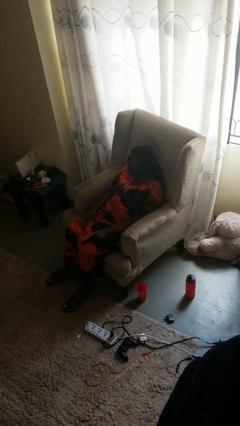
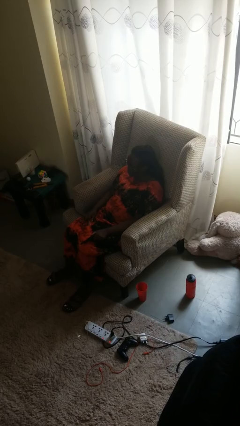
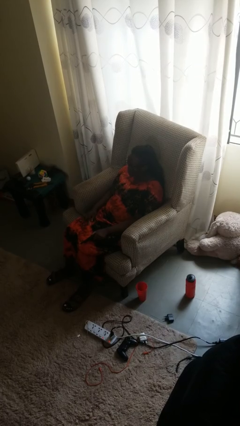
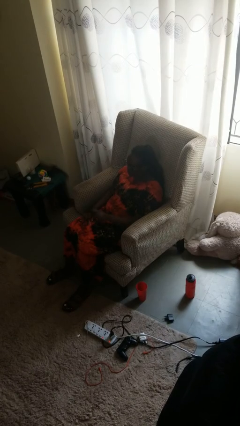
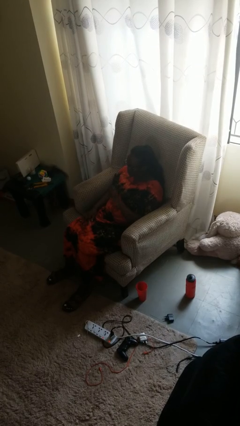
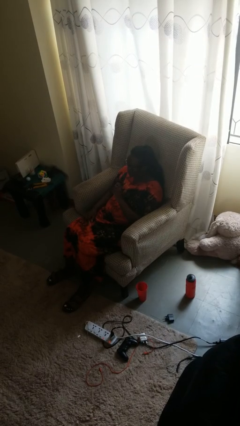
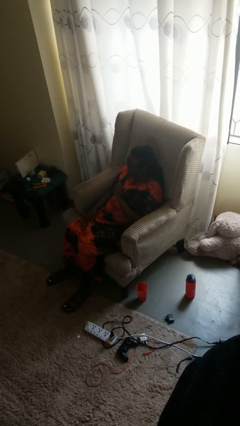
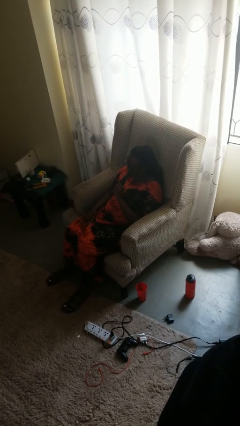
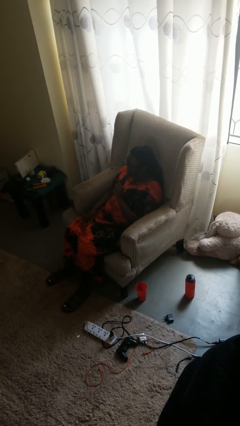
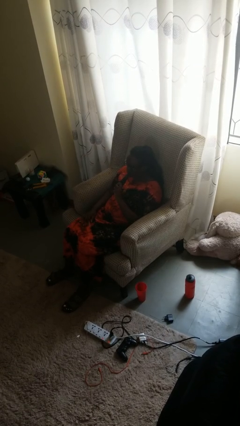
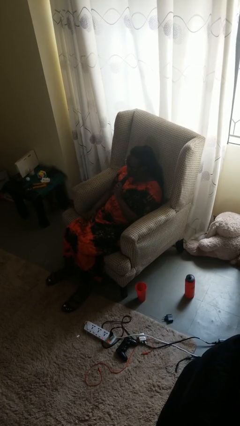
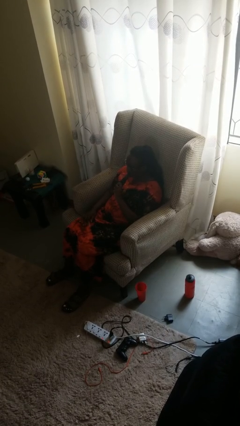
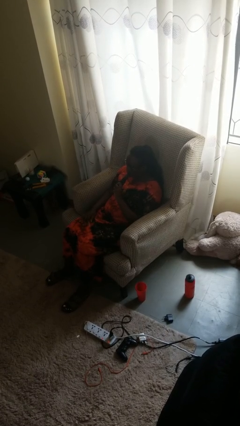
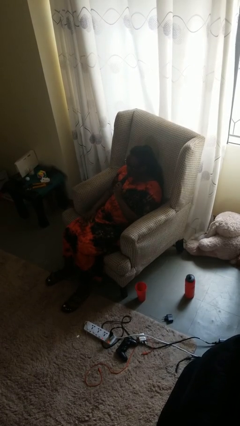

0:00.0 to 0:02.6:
person vapes

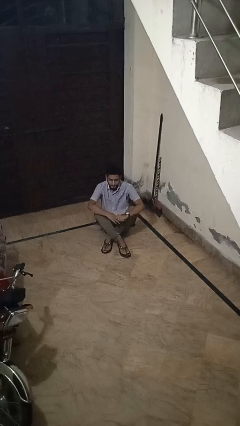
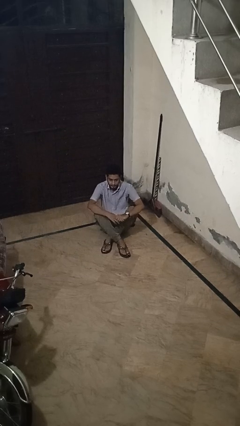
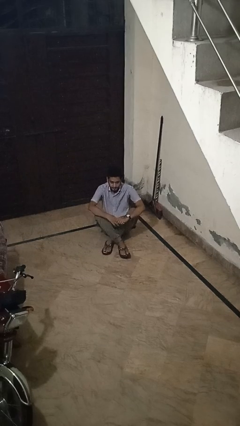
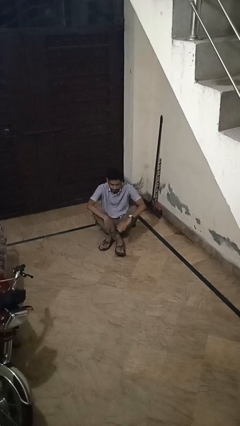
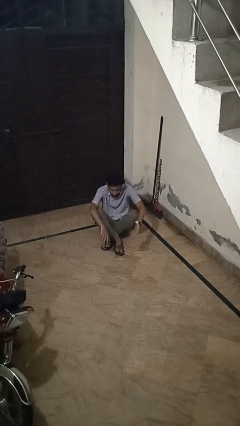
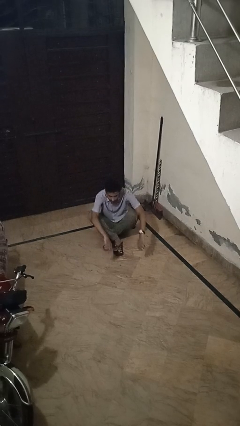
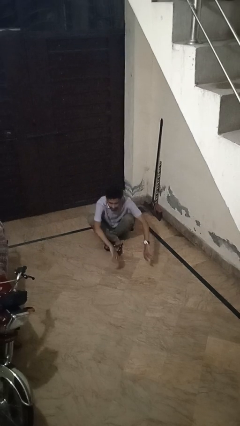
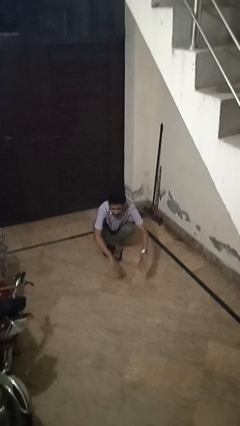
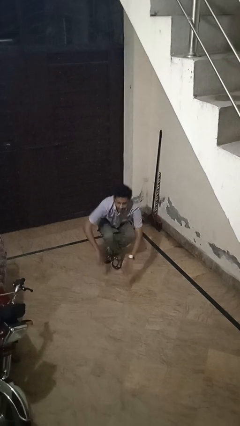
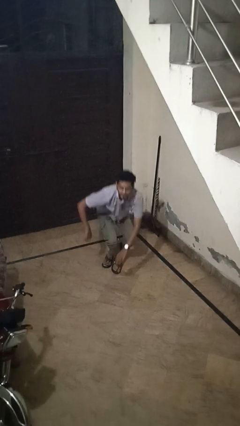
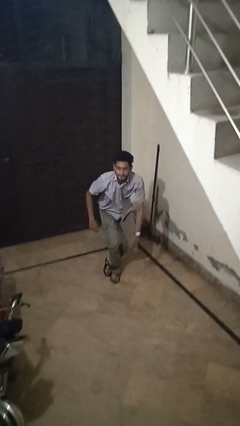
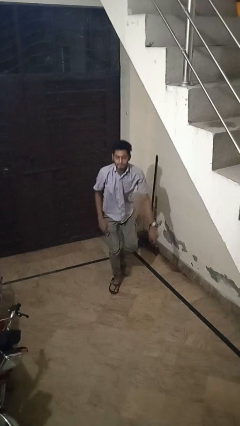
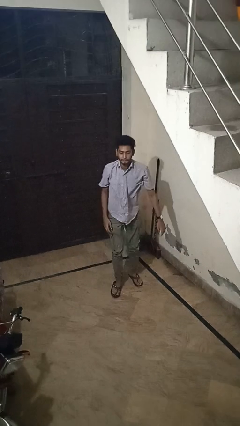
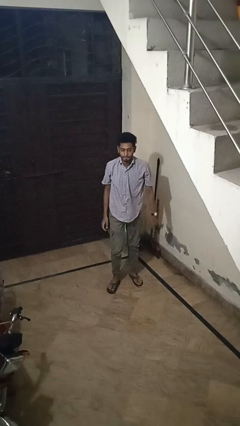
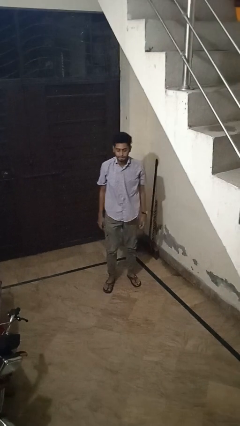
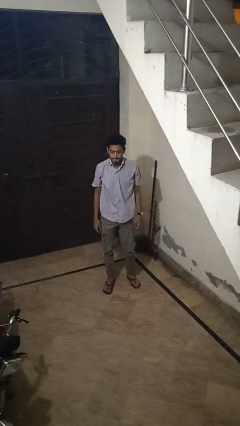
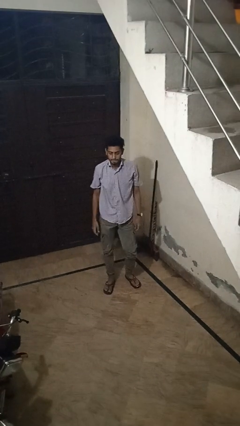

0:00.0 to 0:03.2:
person stands up from floor

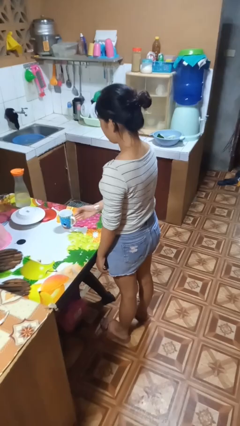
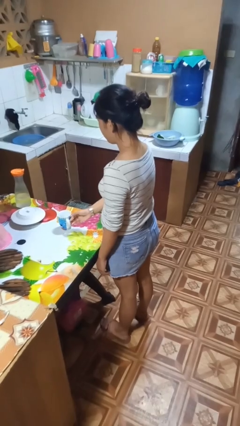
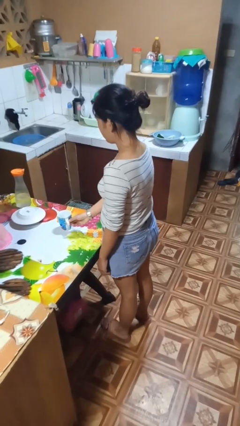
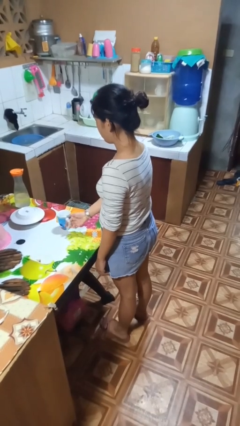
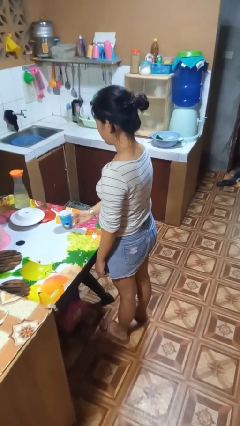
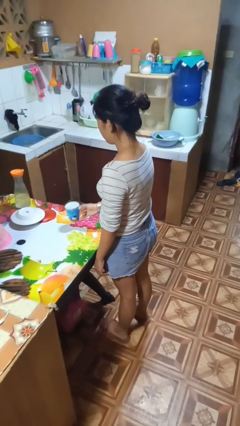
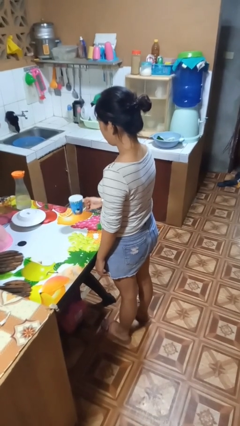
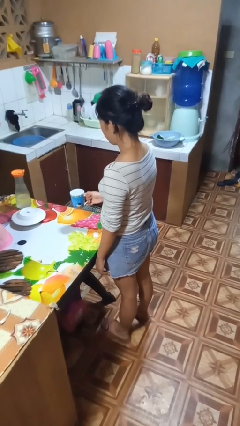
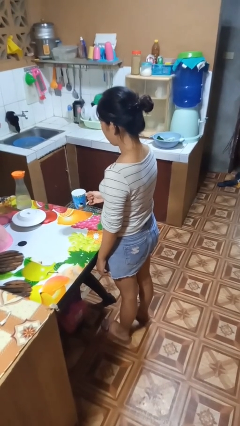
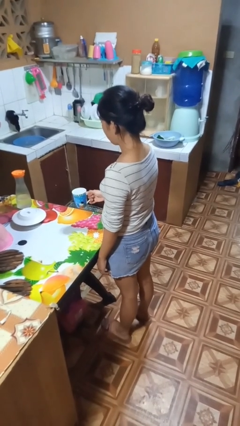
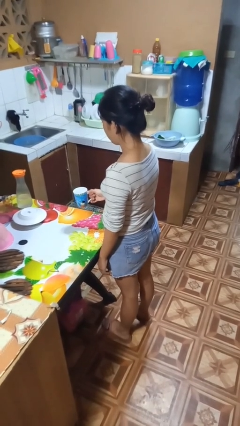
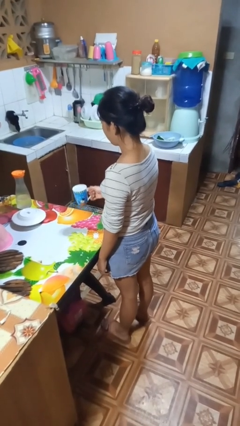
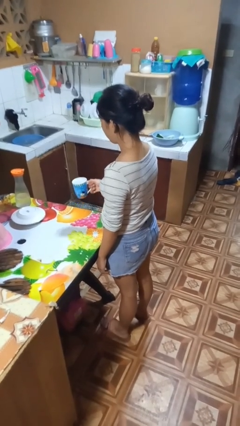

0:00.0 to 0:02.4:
person picks up object from table

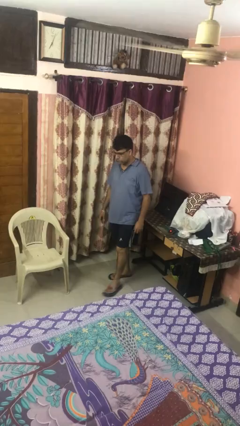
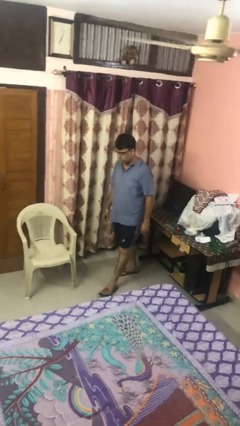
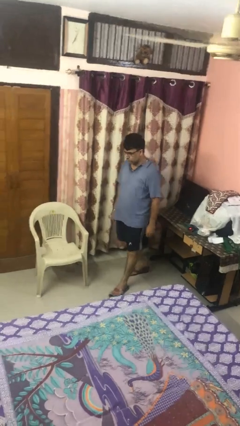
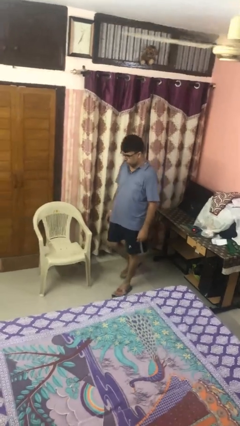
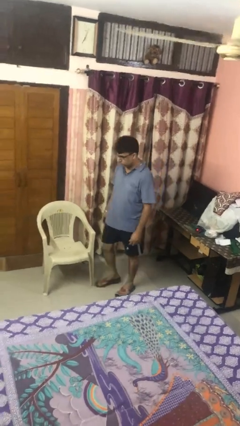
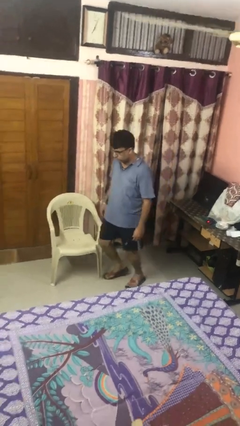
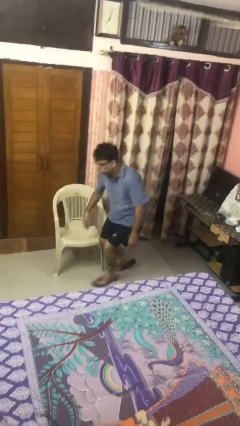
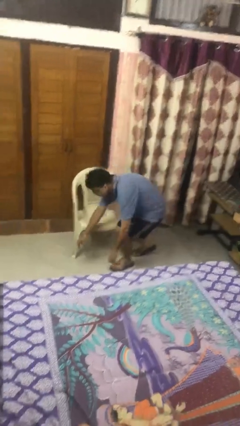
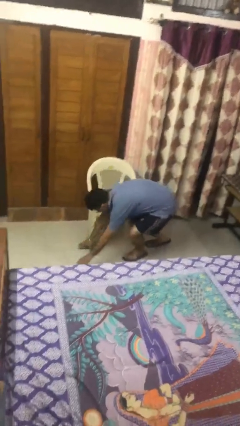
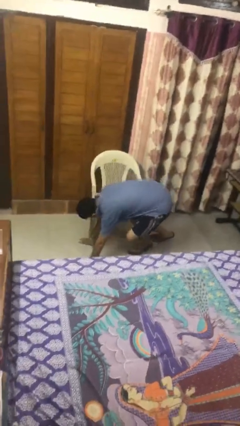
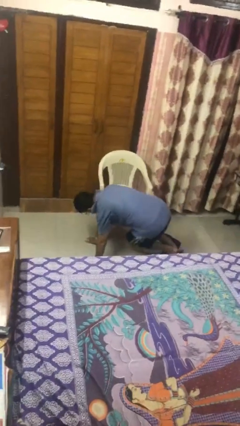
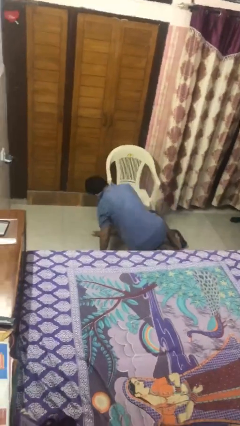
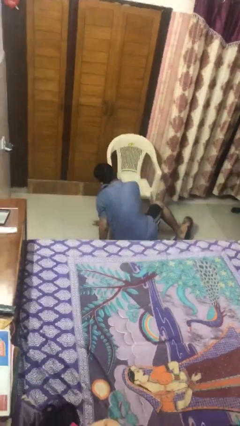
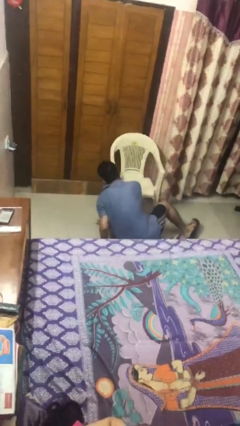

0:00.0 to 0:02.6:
person trips on object on floor

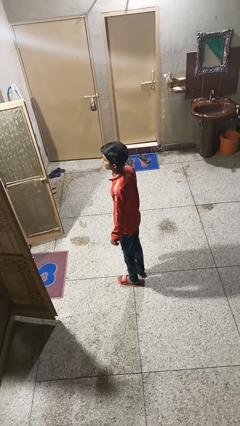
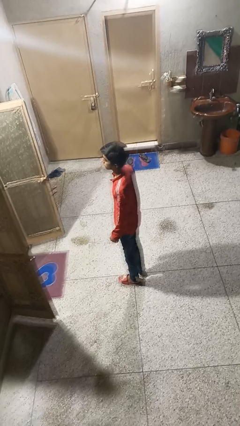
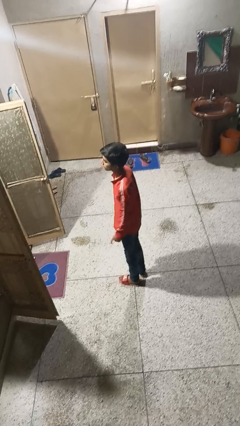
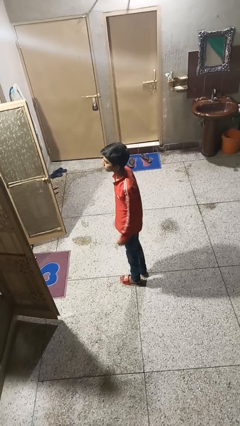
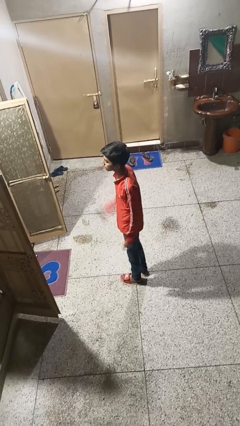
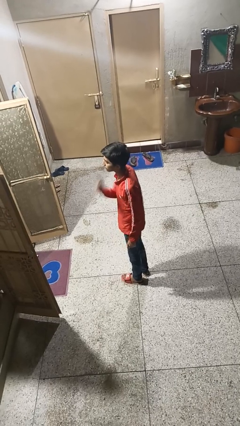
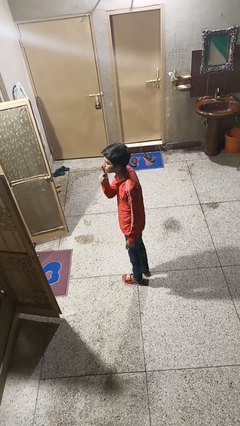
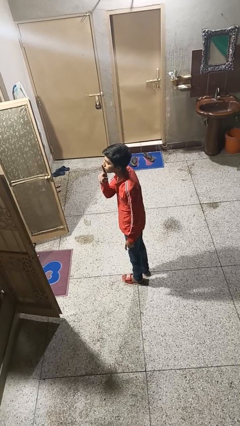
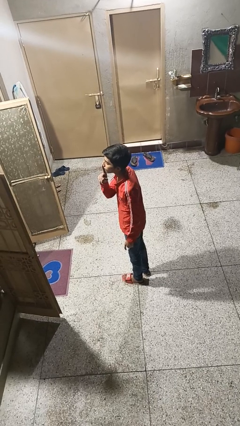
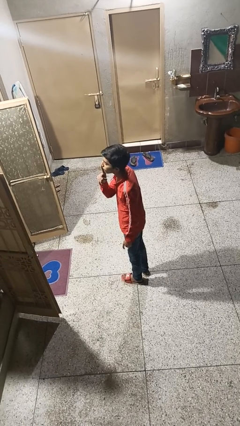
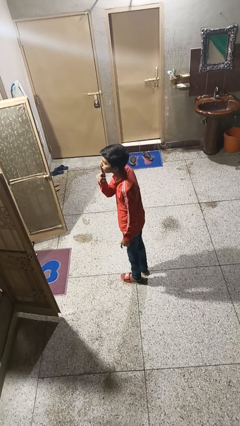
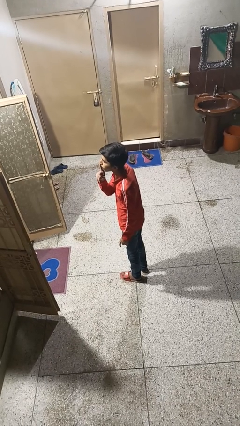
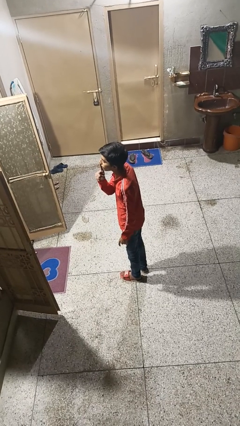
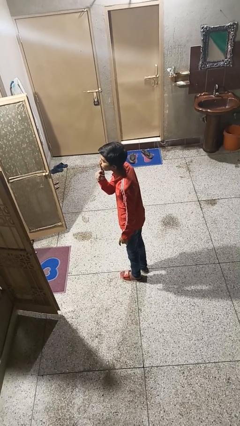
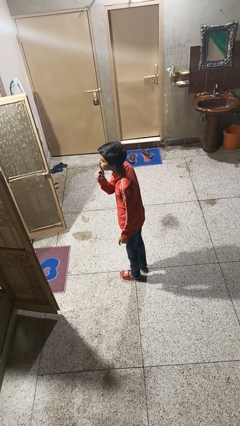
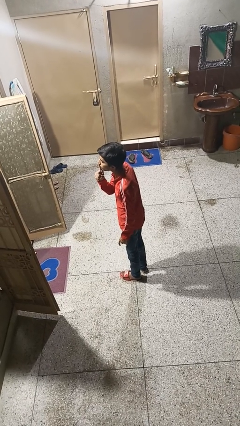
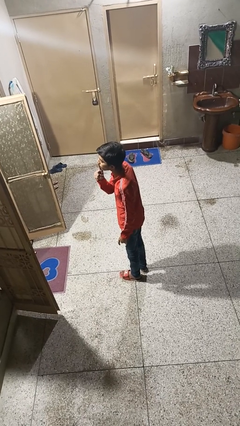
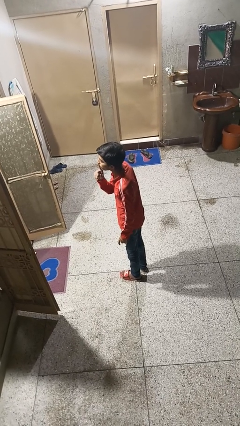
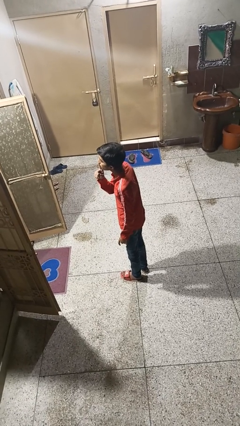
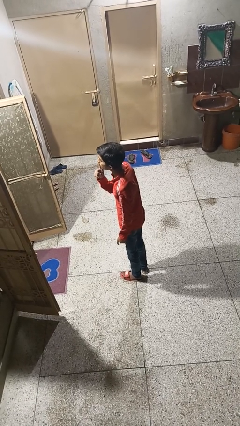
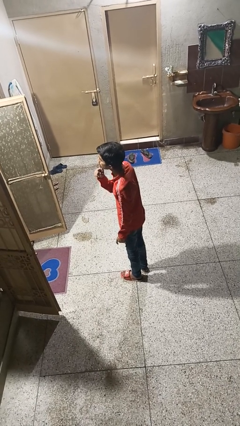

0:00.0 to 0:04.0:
person gestures be quiet

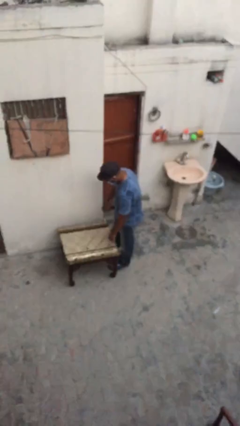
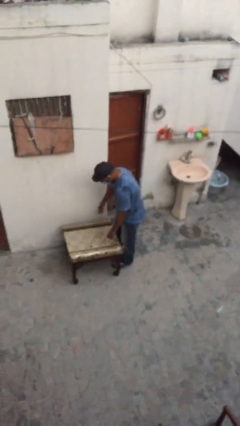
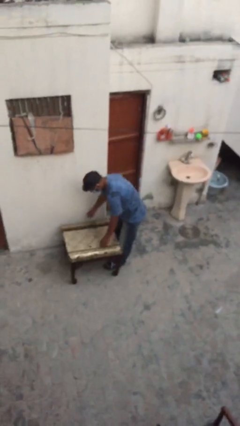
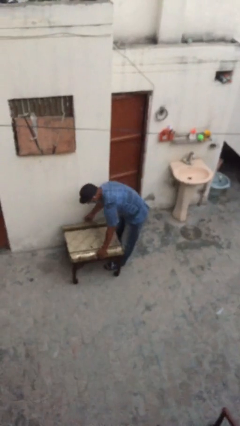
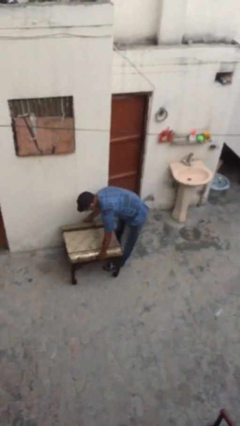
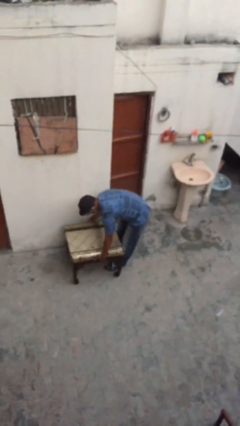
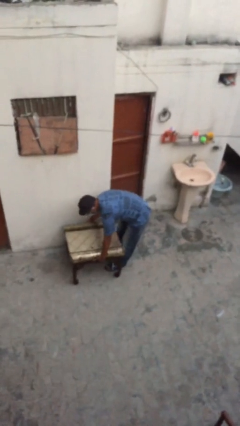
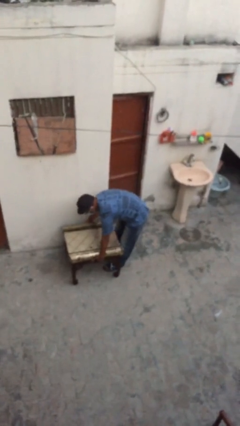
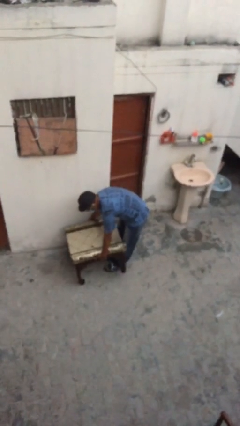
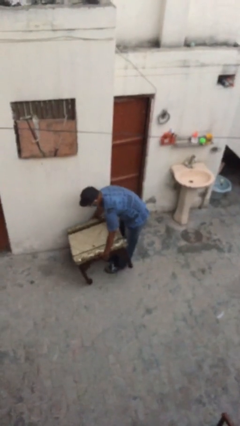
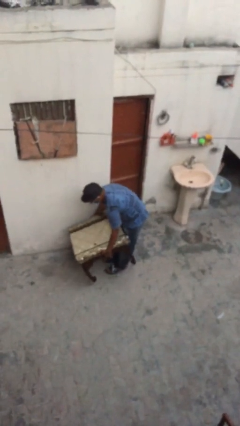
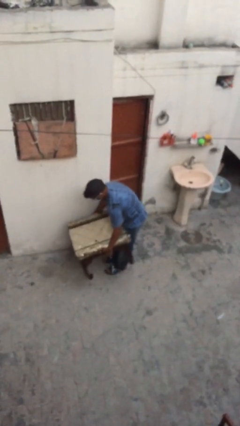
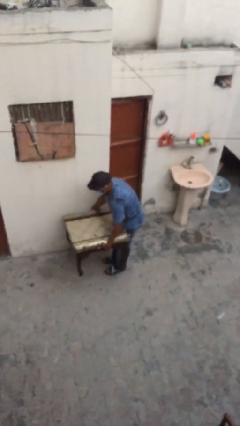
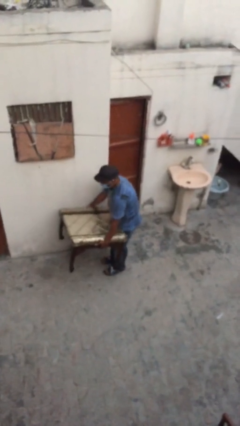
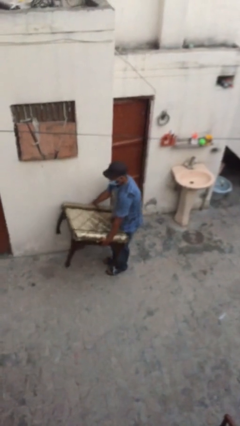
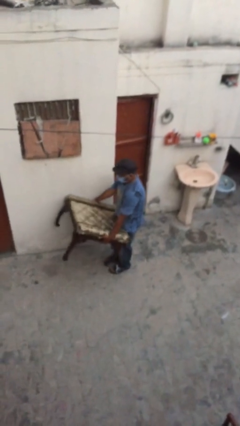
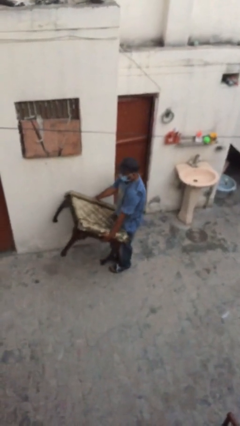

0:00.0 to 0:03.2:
person picks up object from floor
